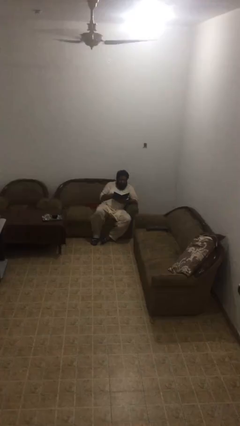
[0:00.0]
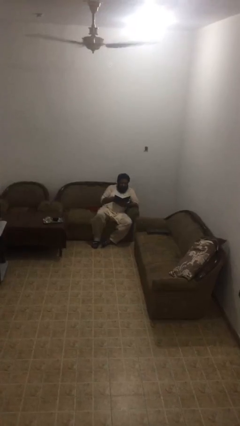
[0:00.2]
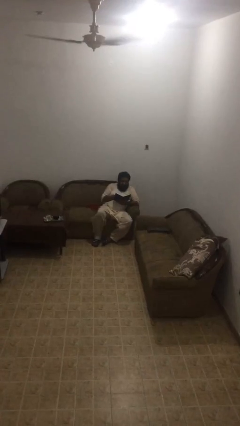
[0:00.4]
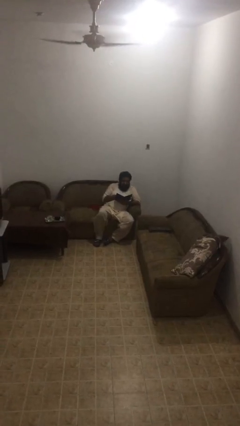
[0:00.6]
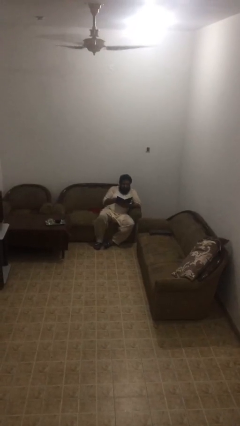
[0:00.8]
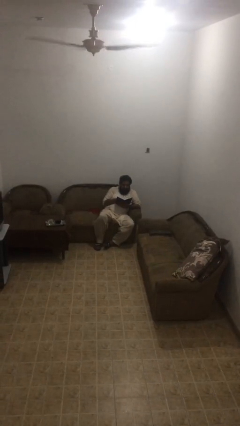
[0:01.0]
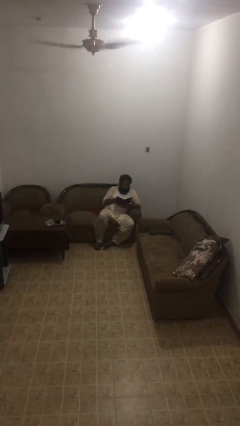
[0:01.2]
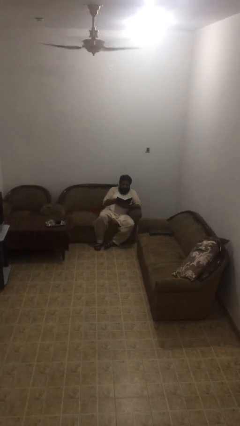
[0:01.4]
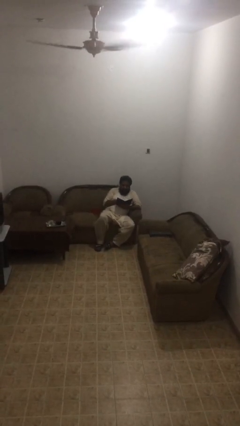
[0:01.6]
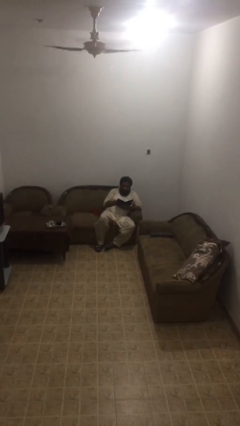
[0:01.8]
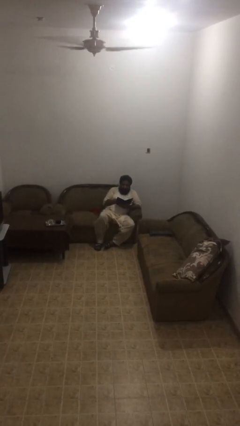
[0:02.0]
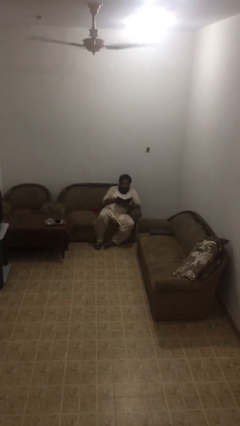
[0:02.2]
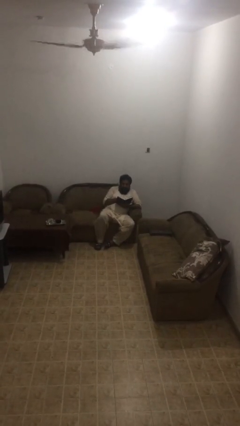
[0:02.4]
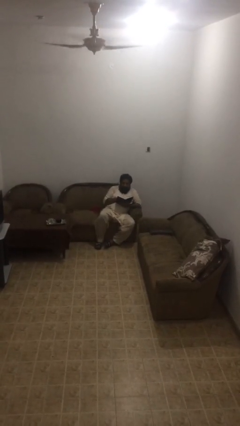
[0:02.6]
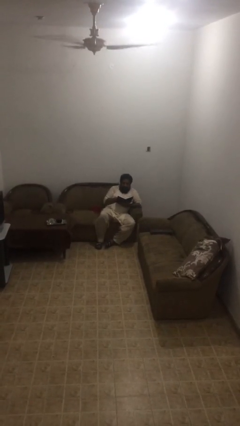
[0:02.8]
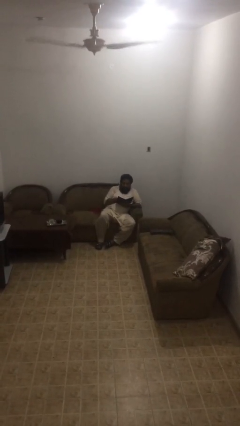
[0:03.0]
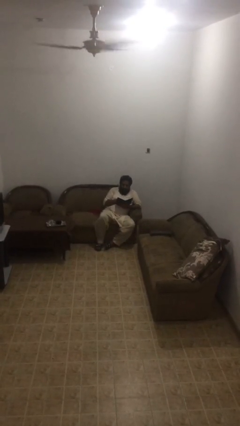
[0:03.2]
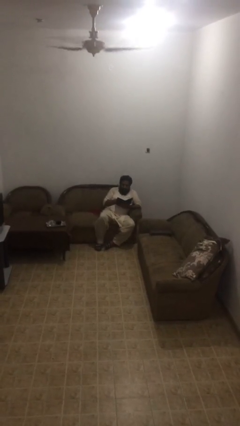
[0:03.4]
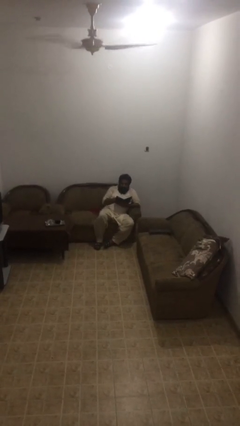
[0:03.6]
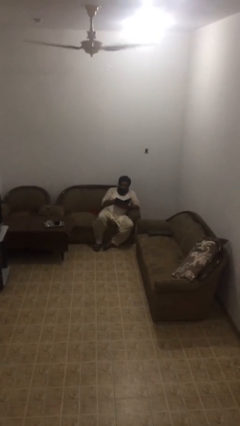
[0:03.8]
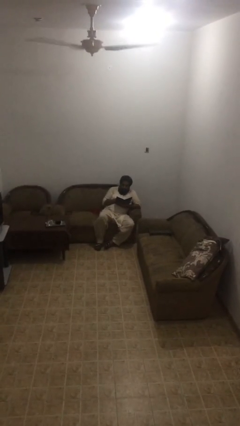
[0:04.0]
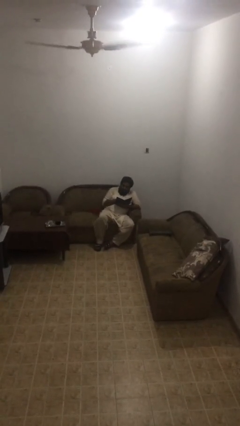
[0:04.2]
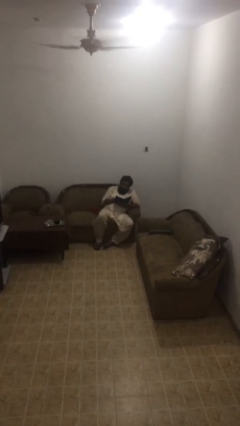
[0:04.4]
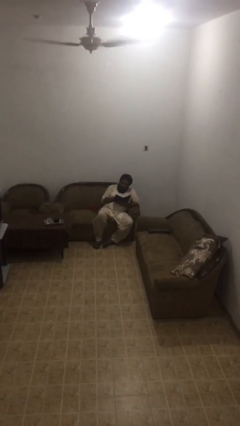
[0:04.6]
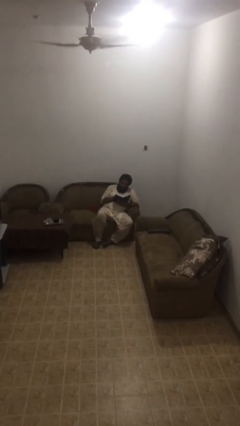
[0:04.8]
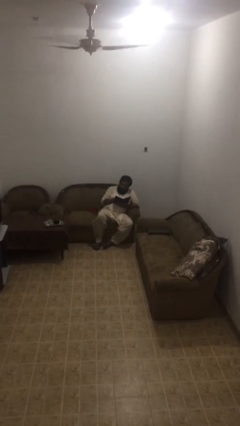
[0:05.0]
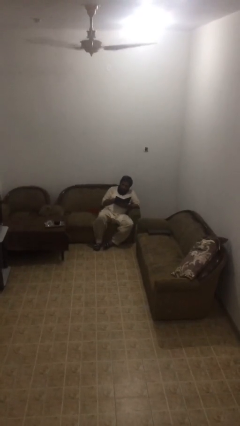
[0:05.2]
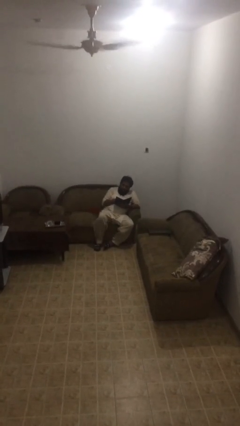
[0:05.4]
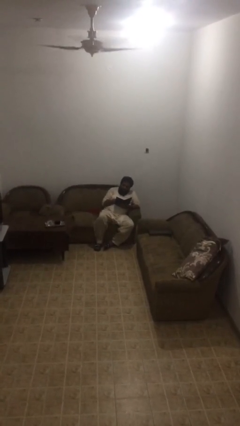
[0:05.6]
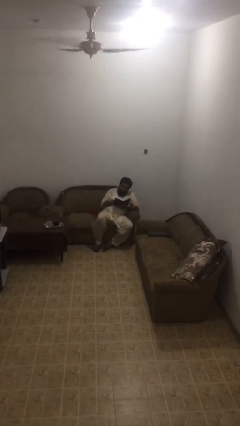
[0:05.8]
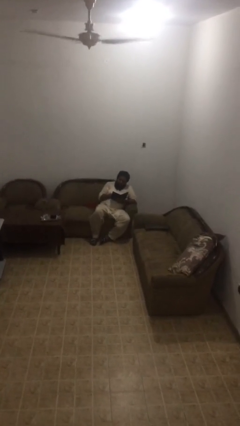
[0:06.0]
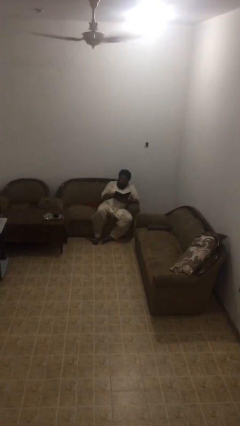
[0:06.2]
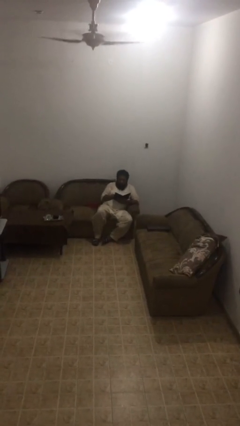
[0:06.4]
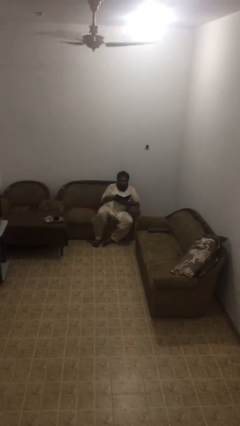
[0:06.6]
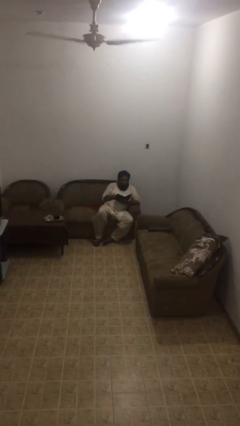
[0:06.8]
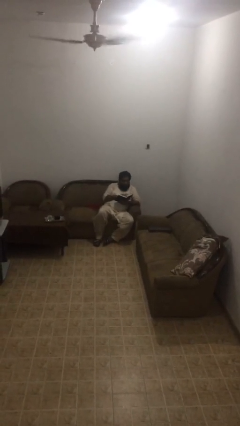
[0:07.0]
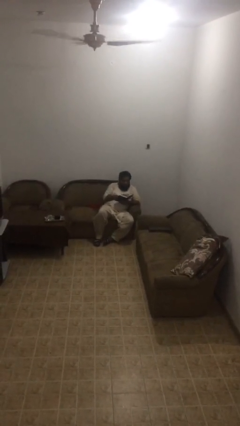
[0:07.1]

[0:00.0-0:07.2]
person reads document

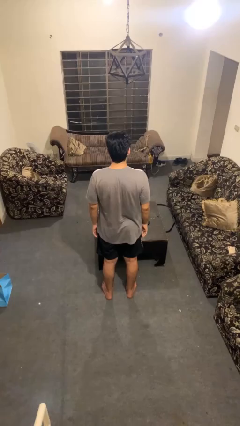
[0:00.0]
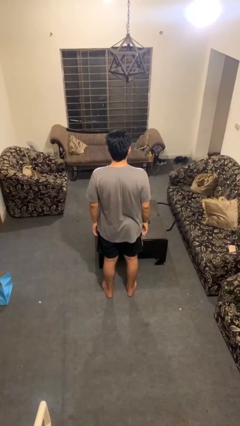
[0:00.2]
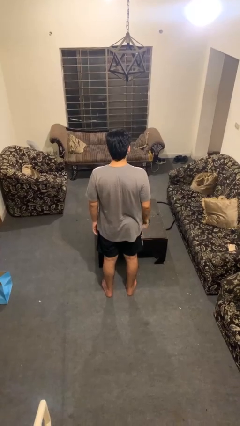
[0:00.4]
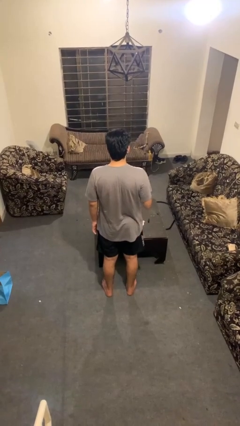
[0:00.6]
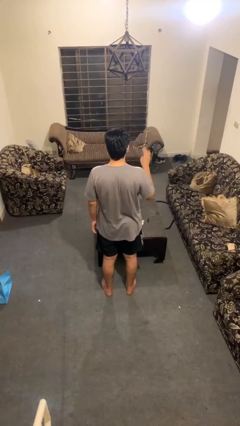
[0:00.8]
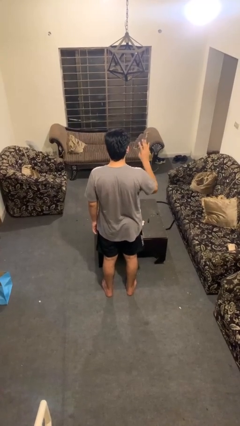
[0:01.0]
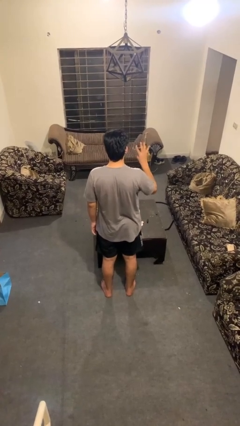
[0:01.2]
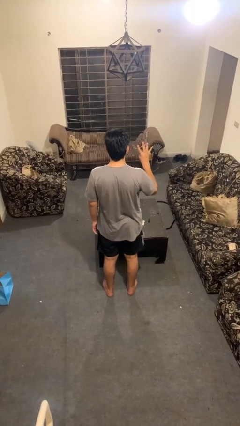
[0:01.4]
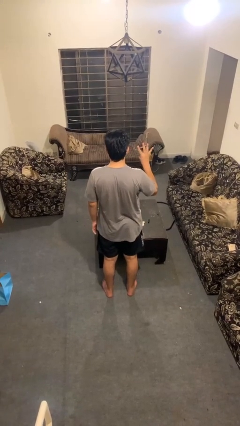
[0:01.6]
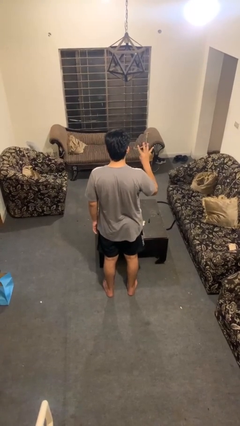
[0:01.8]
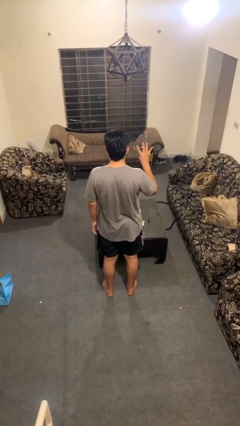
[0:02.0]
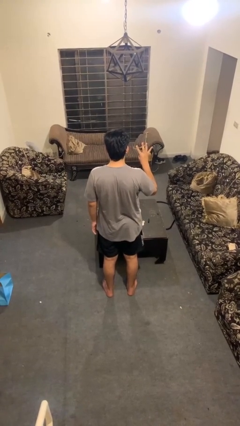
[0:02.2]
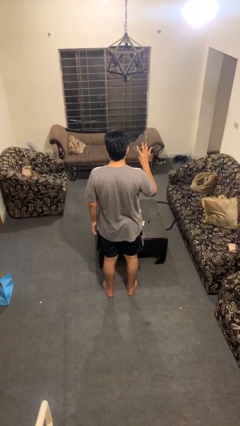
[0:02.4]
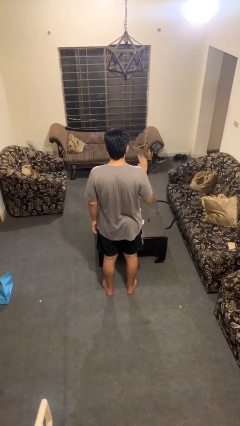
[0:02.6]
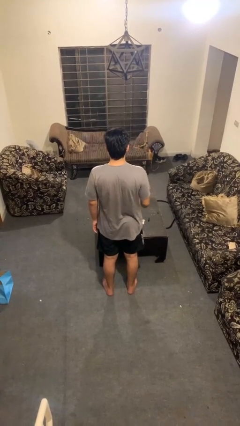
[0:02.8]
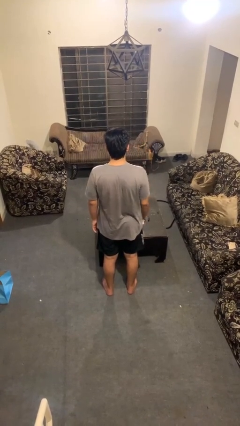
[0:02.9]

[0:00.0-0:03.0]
person gestures number four

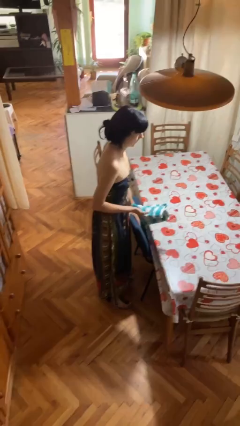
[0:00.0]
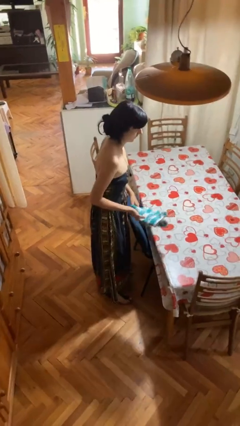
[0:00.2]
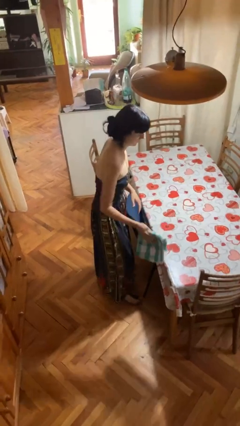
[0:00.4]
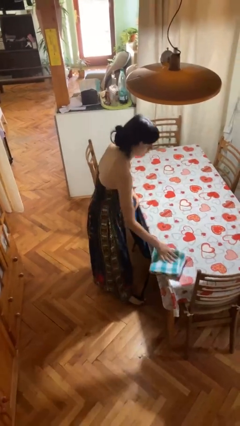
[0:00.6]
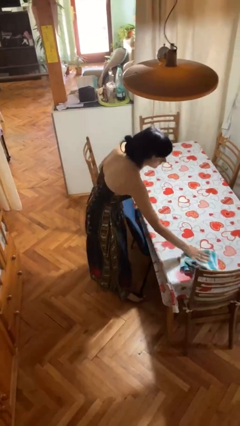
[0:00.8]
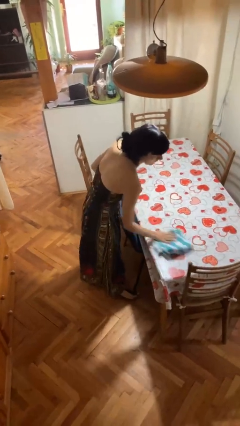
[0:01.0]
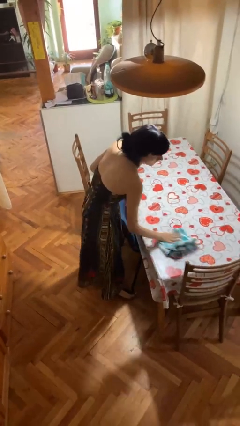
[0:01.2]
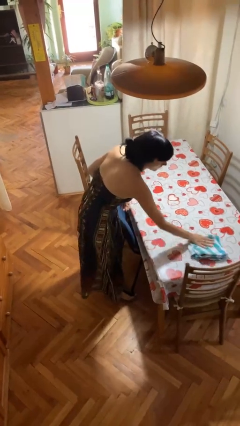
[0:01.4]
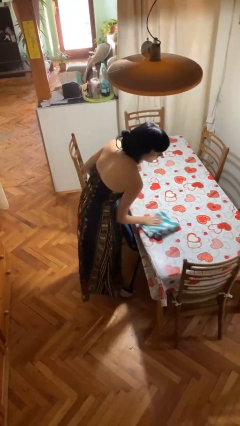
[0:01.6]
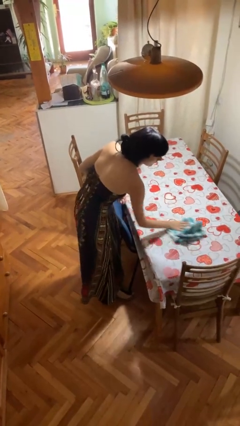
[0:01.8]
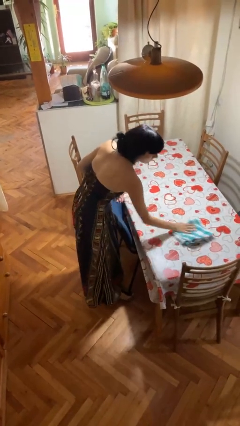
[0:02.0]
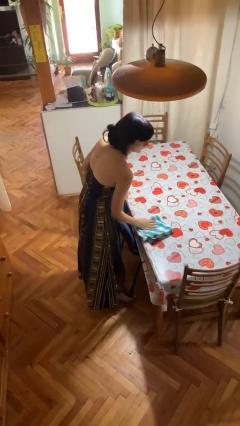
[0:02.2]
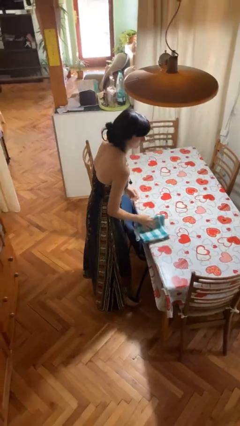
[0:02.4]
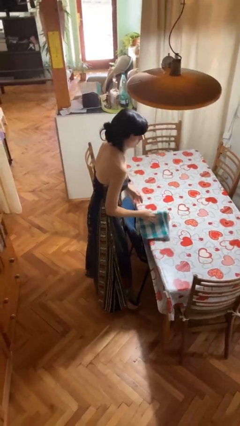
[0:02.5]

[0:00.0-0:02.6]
person cleans table with rag

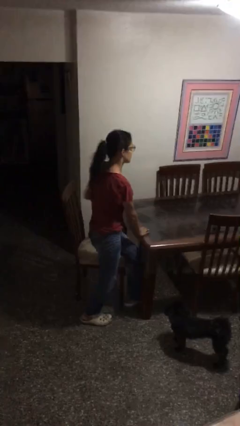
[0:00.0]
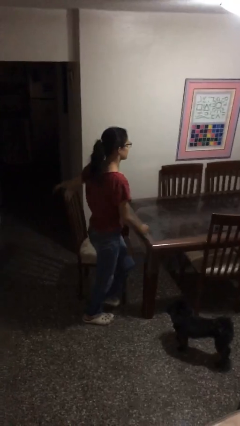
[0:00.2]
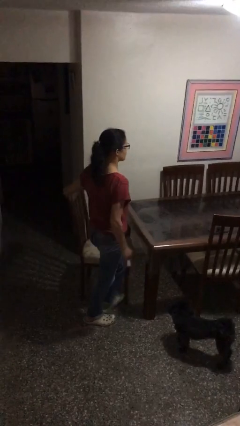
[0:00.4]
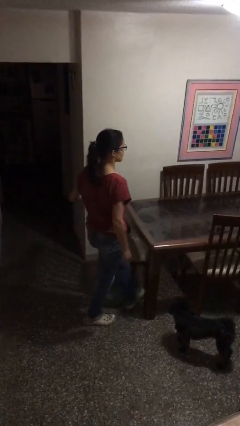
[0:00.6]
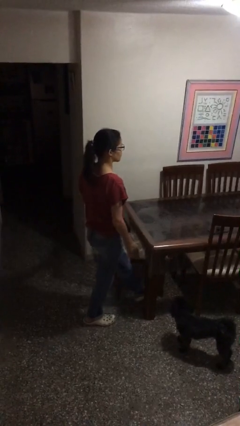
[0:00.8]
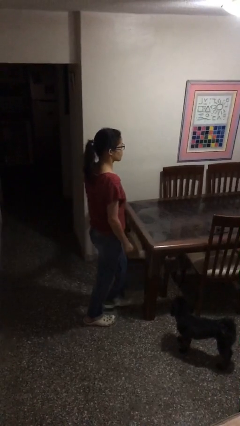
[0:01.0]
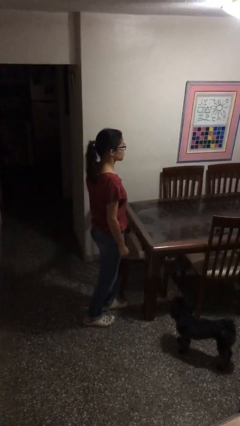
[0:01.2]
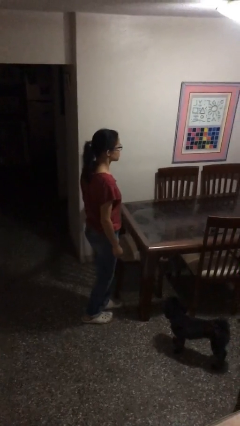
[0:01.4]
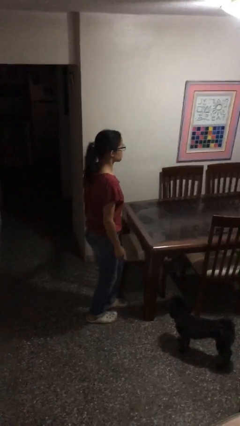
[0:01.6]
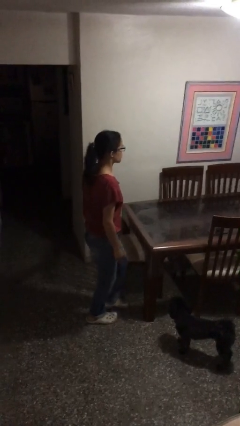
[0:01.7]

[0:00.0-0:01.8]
person stands up

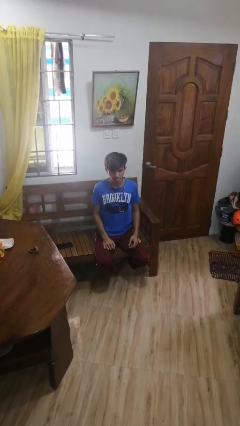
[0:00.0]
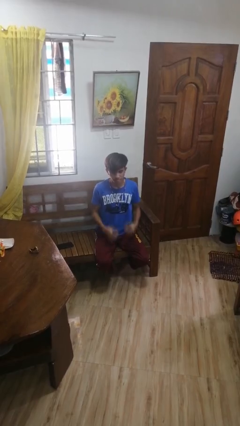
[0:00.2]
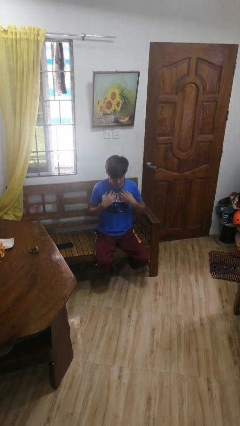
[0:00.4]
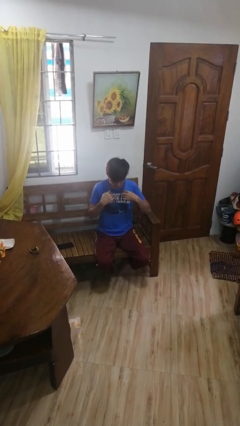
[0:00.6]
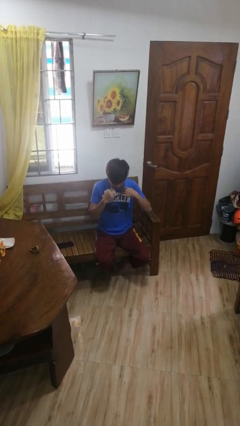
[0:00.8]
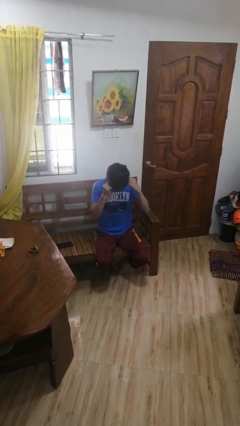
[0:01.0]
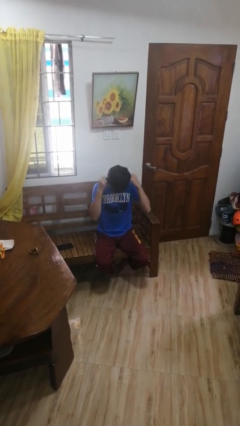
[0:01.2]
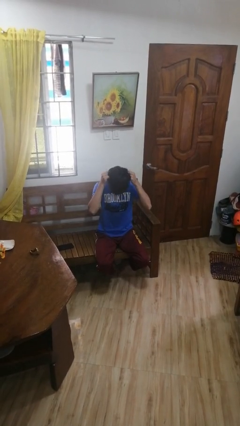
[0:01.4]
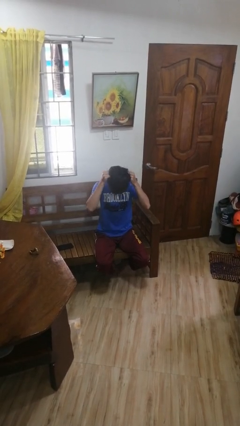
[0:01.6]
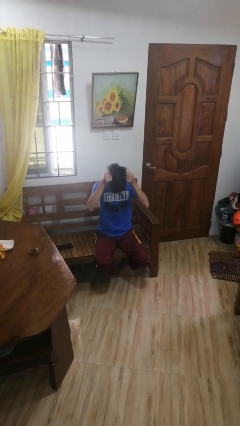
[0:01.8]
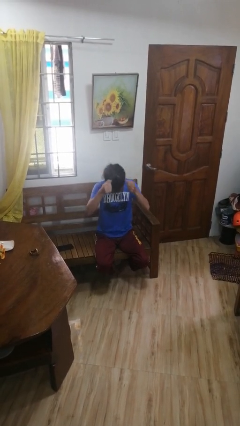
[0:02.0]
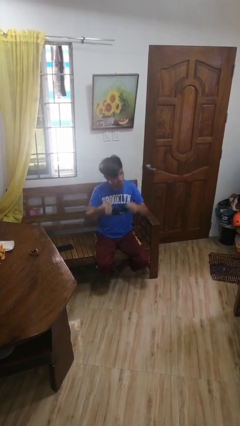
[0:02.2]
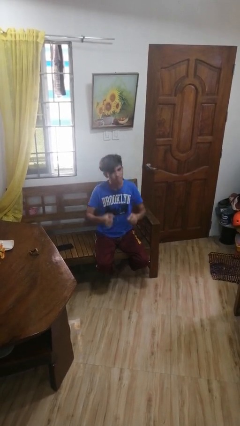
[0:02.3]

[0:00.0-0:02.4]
person takes off necklace
